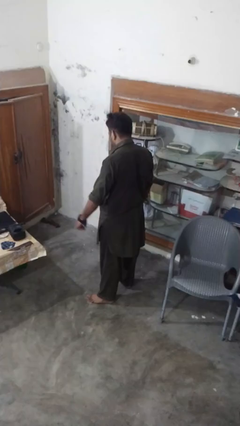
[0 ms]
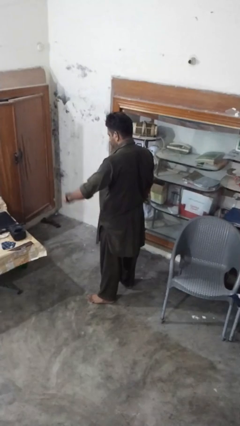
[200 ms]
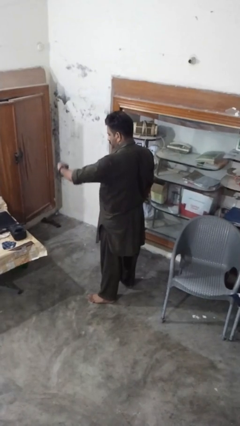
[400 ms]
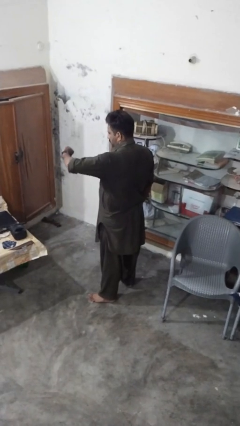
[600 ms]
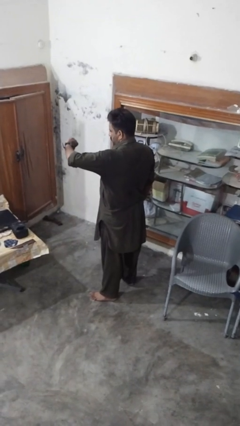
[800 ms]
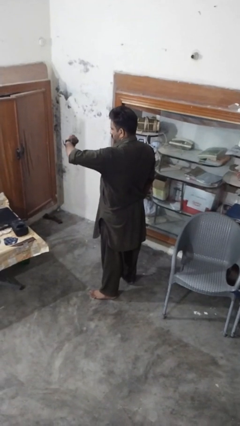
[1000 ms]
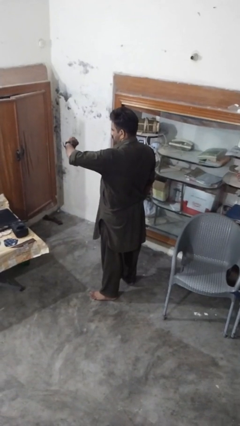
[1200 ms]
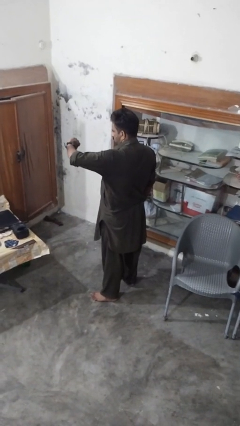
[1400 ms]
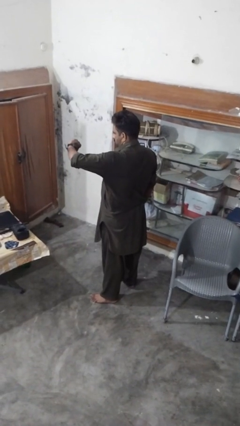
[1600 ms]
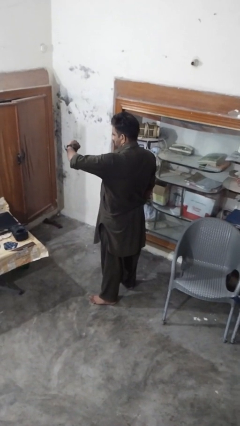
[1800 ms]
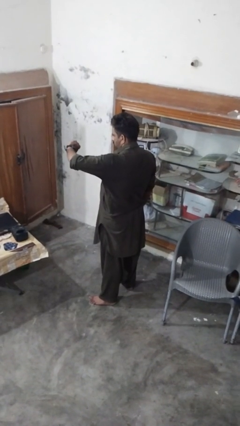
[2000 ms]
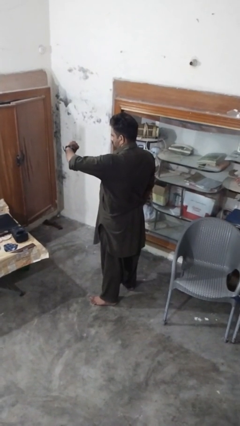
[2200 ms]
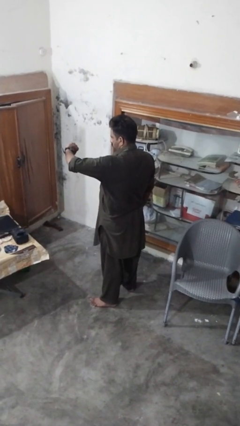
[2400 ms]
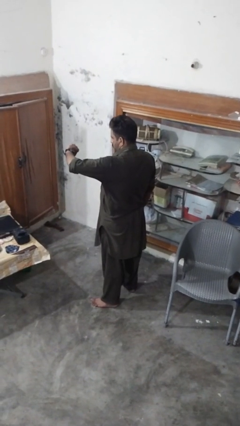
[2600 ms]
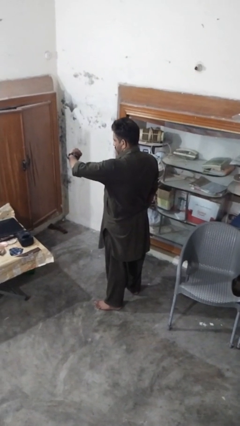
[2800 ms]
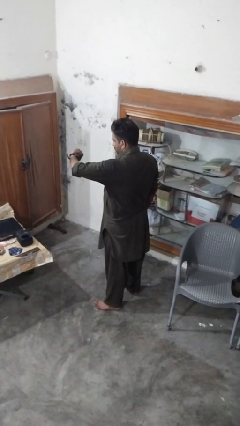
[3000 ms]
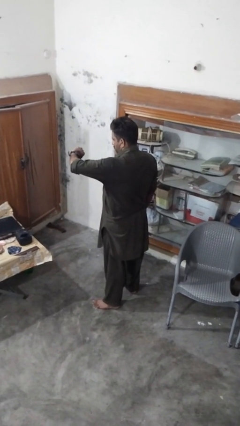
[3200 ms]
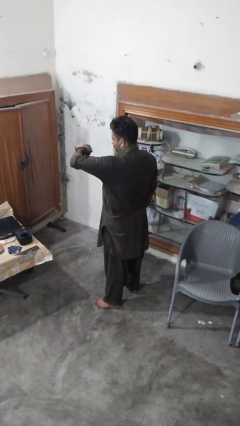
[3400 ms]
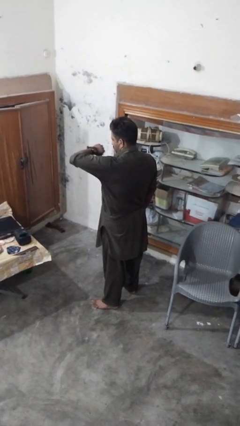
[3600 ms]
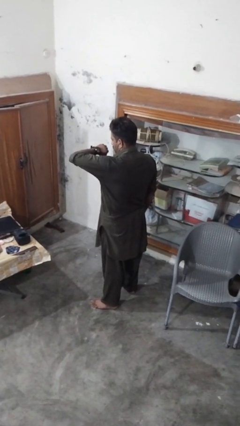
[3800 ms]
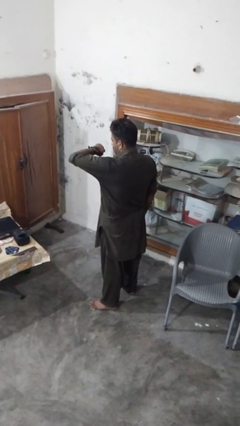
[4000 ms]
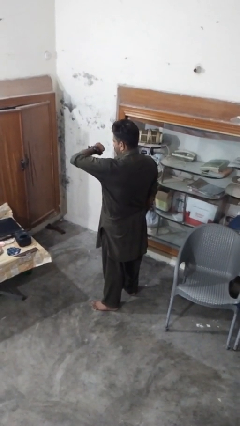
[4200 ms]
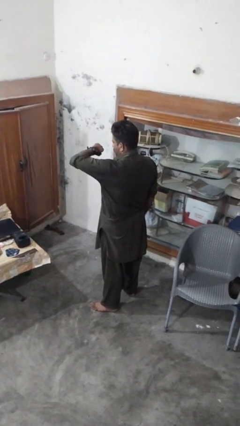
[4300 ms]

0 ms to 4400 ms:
person looks at wristwatch

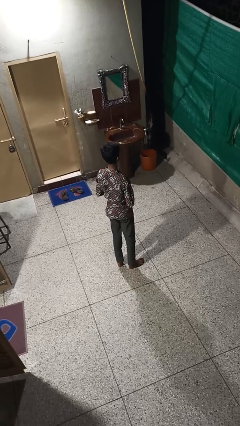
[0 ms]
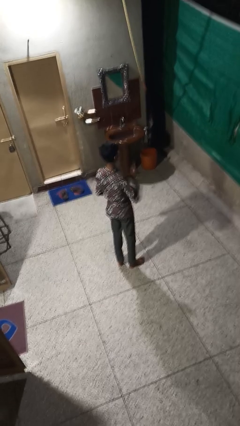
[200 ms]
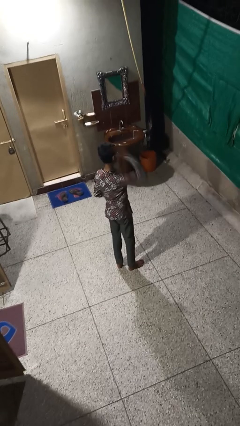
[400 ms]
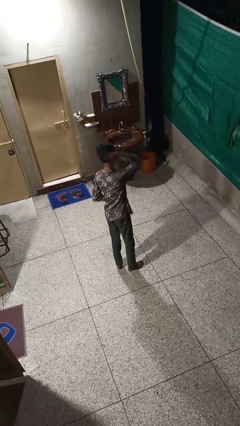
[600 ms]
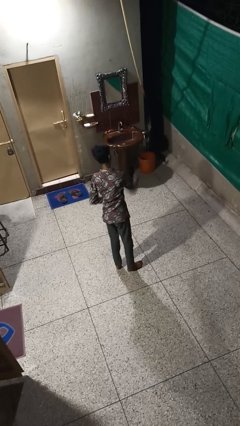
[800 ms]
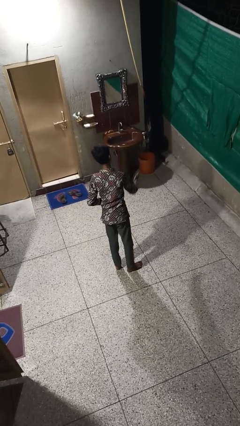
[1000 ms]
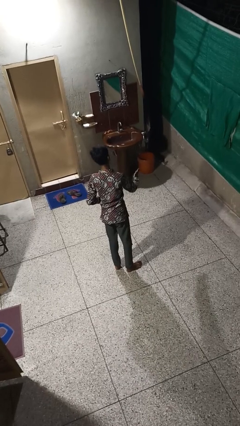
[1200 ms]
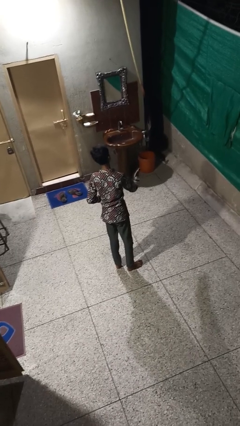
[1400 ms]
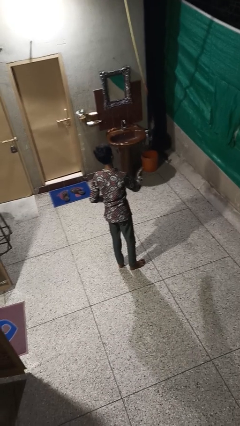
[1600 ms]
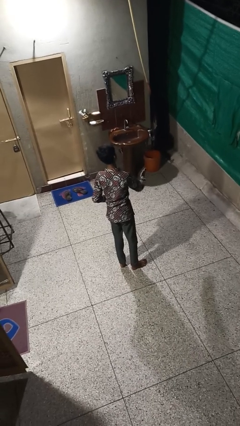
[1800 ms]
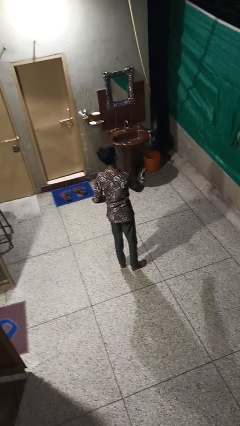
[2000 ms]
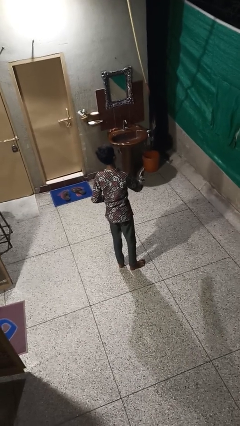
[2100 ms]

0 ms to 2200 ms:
person karate chop

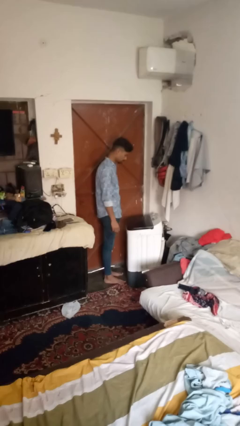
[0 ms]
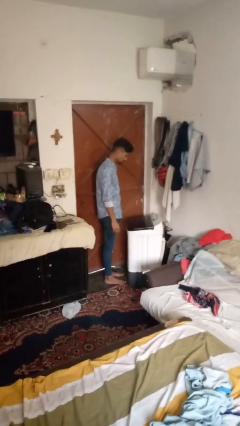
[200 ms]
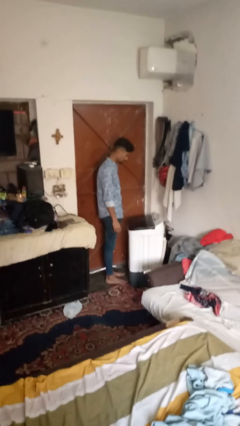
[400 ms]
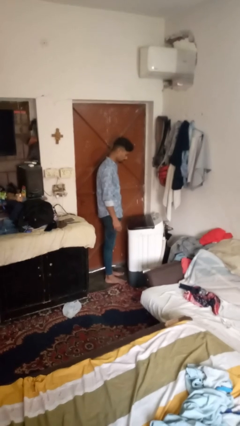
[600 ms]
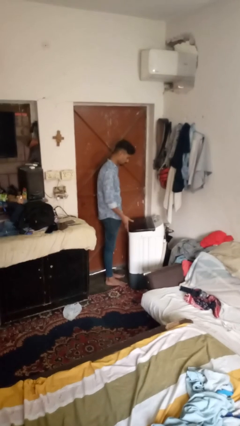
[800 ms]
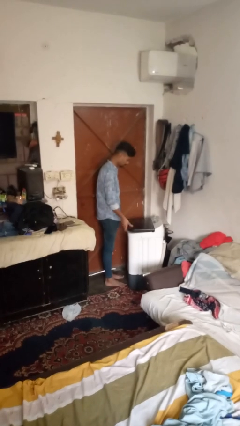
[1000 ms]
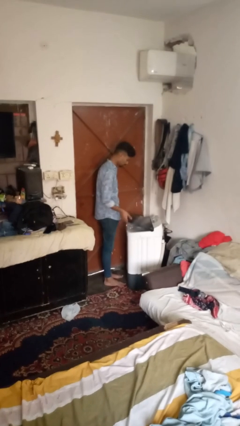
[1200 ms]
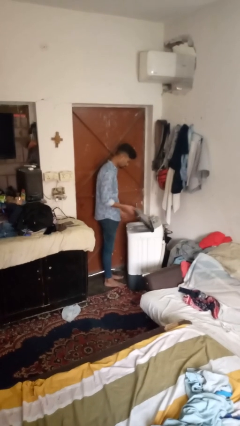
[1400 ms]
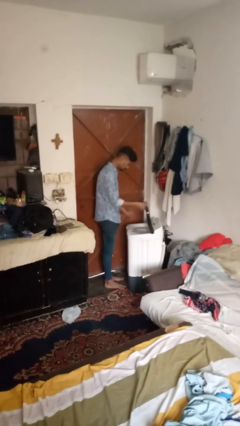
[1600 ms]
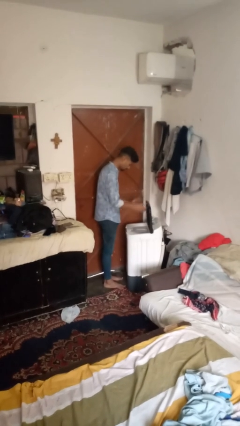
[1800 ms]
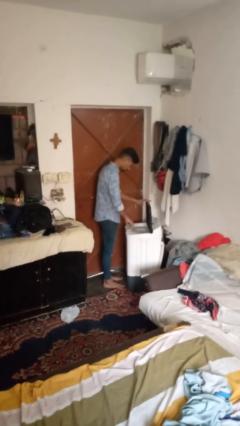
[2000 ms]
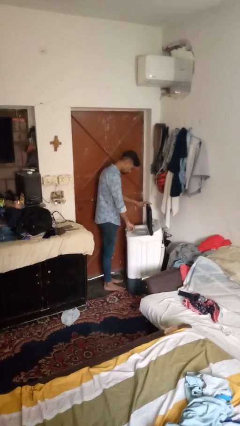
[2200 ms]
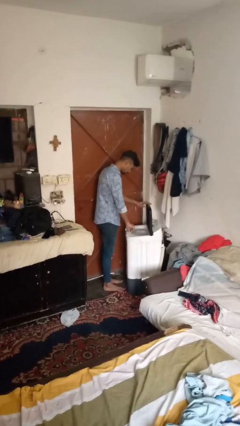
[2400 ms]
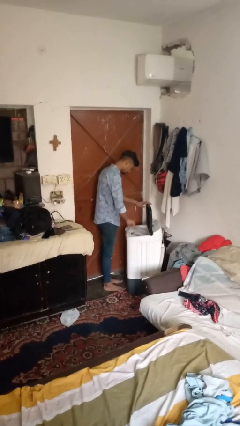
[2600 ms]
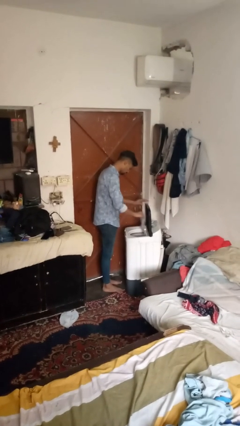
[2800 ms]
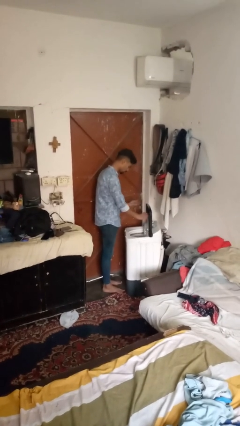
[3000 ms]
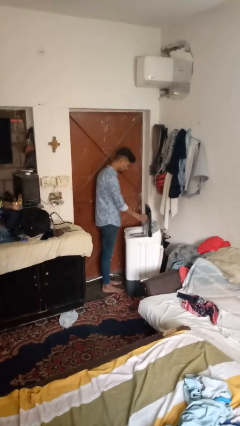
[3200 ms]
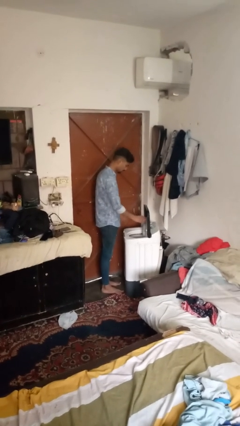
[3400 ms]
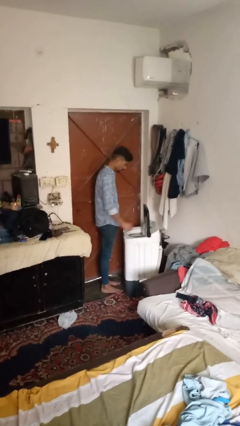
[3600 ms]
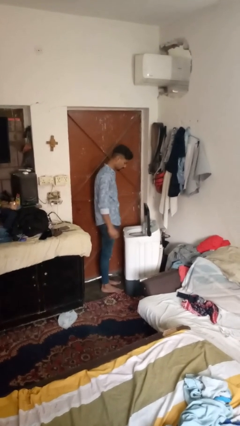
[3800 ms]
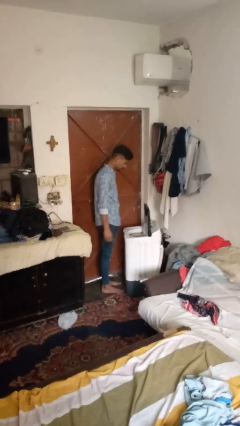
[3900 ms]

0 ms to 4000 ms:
person opens clothes washer

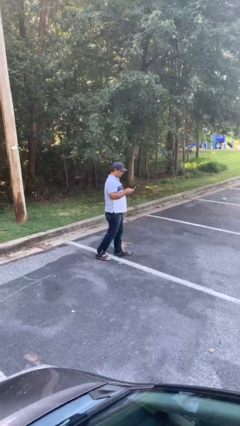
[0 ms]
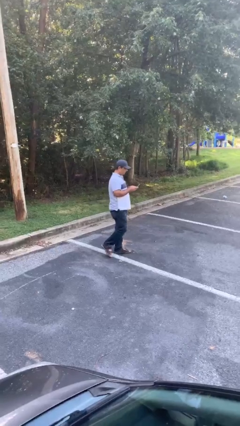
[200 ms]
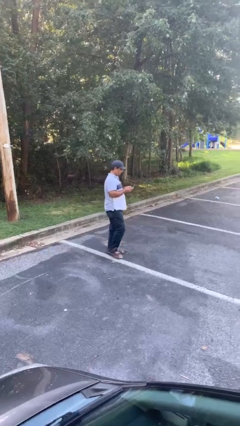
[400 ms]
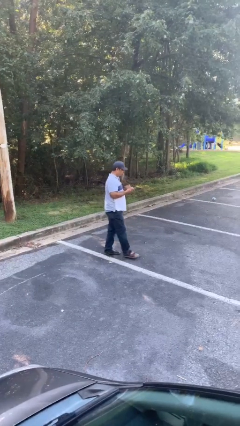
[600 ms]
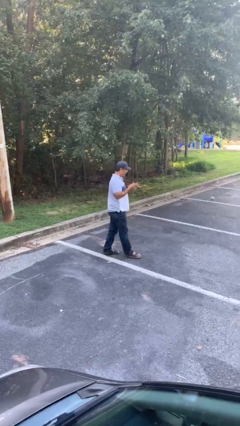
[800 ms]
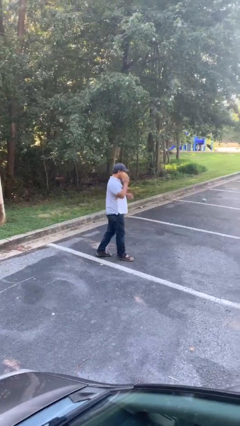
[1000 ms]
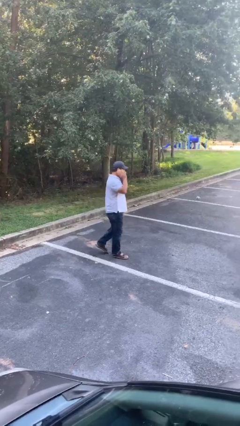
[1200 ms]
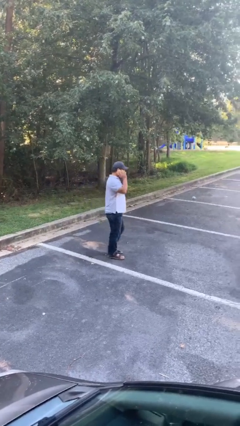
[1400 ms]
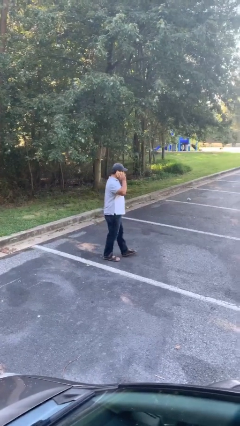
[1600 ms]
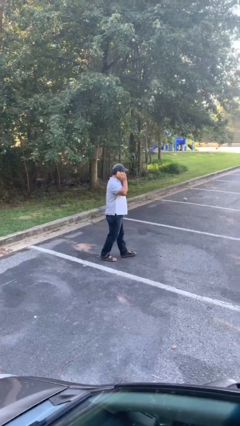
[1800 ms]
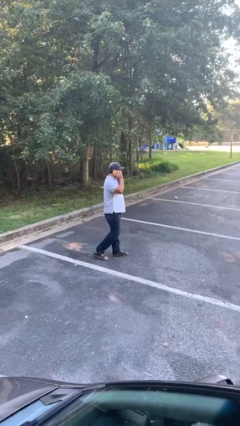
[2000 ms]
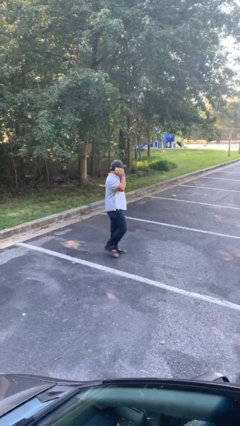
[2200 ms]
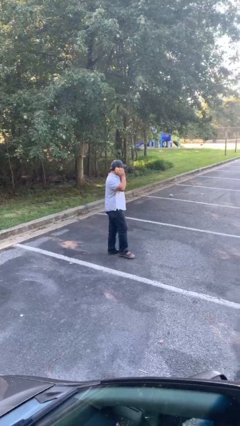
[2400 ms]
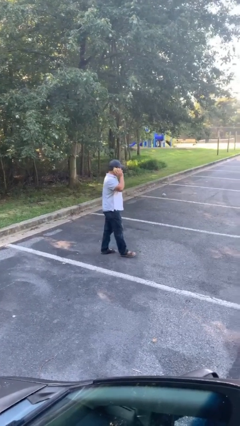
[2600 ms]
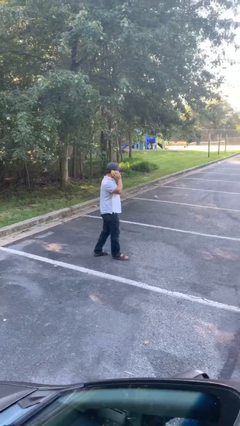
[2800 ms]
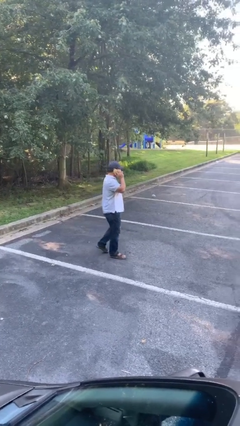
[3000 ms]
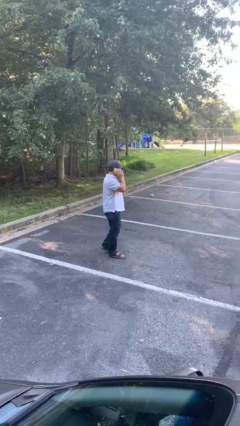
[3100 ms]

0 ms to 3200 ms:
person talks on phone

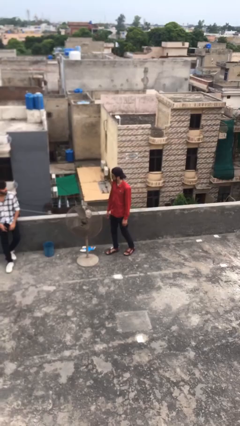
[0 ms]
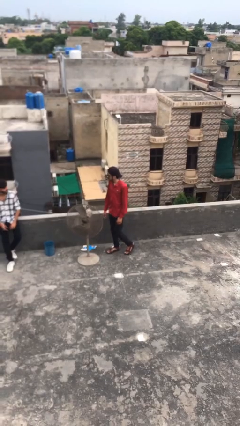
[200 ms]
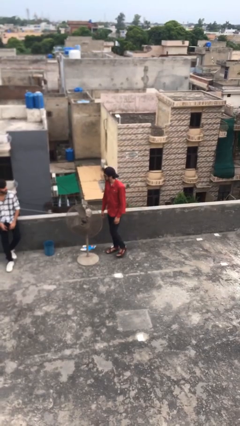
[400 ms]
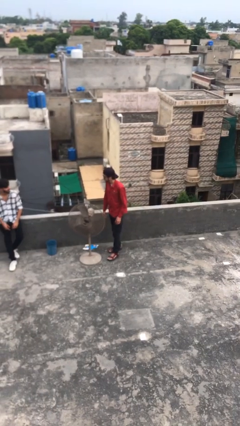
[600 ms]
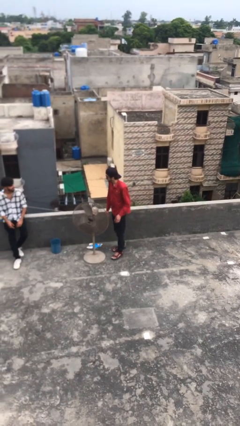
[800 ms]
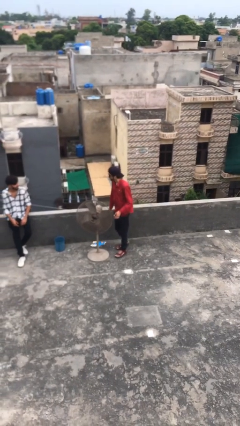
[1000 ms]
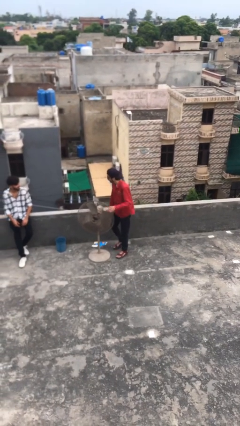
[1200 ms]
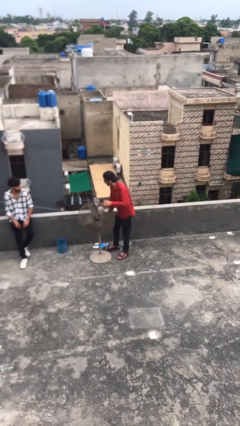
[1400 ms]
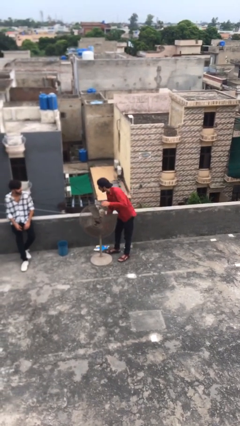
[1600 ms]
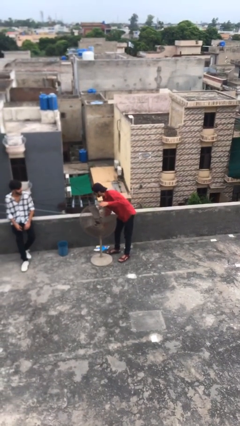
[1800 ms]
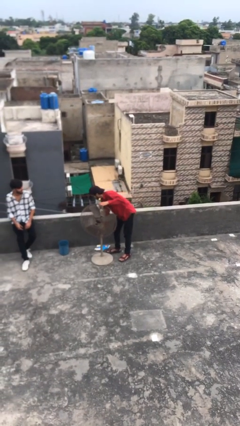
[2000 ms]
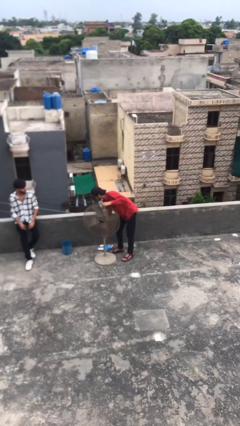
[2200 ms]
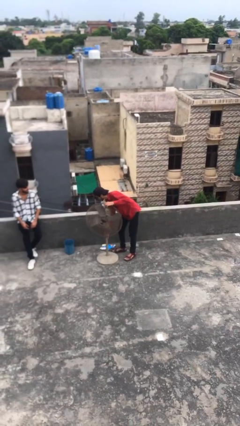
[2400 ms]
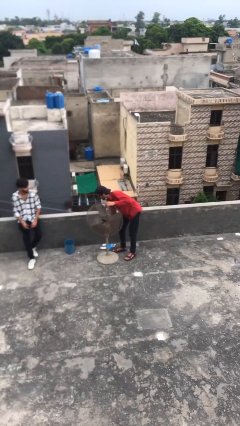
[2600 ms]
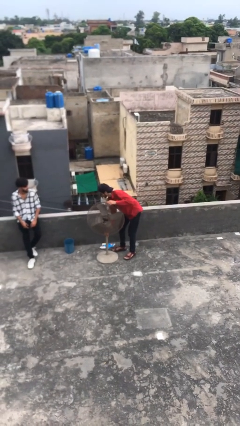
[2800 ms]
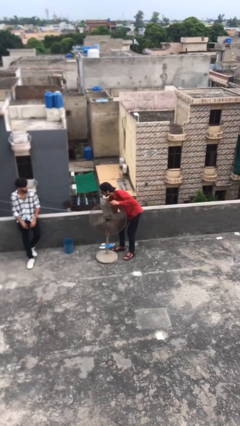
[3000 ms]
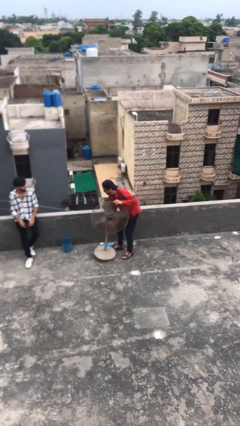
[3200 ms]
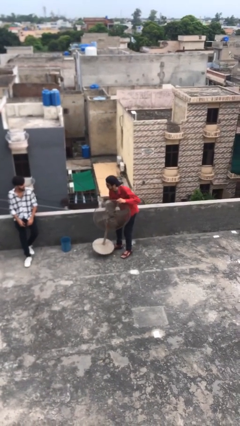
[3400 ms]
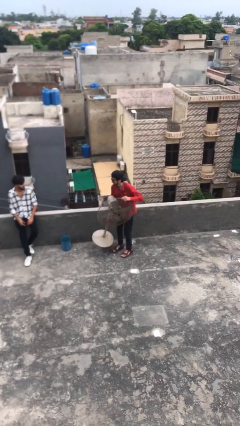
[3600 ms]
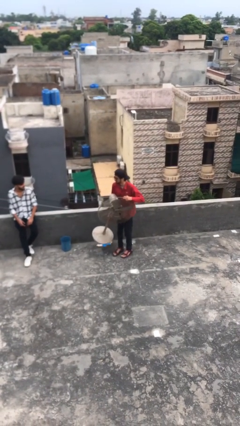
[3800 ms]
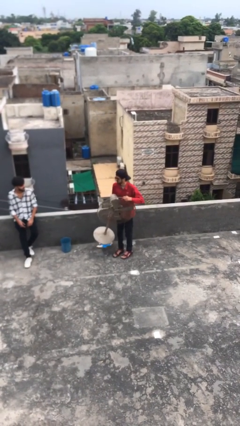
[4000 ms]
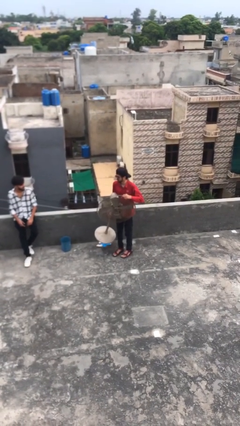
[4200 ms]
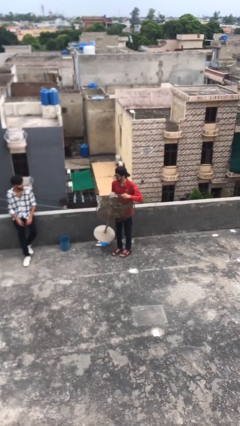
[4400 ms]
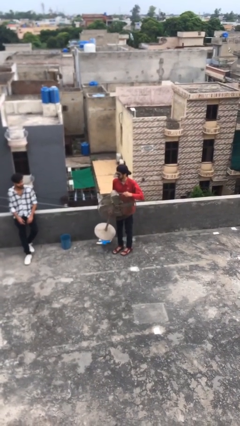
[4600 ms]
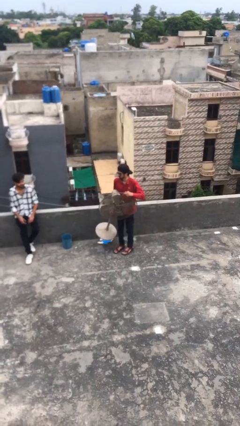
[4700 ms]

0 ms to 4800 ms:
person picks up object from floor
